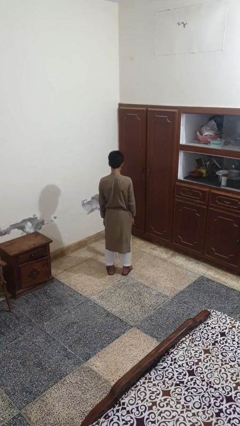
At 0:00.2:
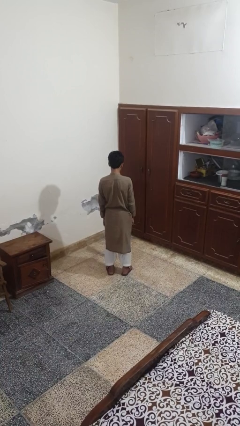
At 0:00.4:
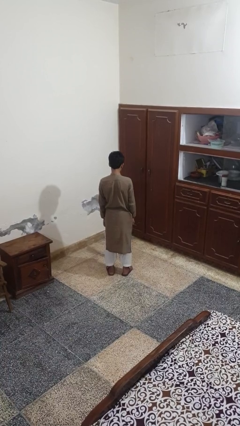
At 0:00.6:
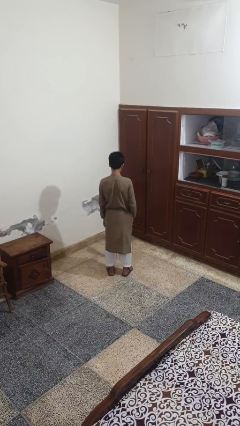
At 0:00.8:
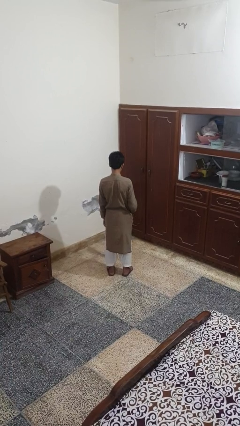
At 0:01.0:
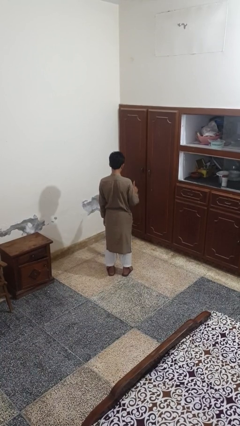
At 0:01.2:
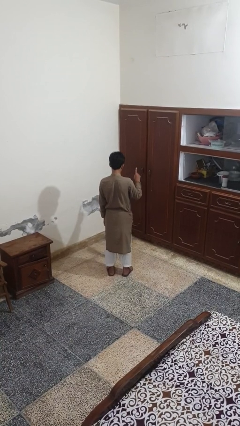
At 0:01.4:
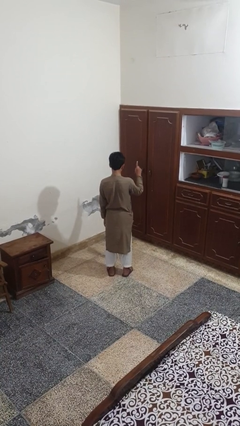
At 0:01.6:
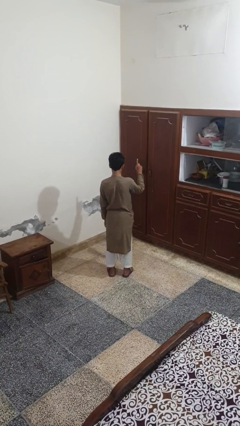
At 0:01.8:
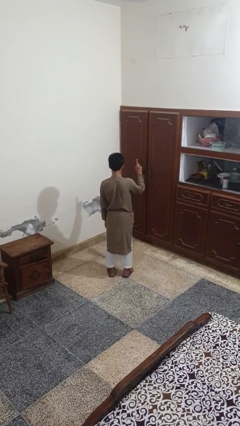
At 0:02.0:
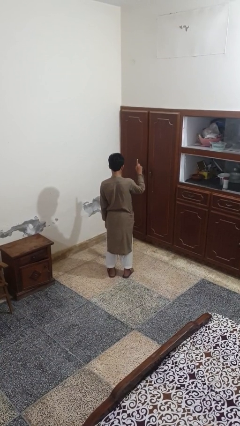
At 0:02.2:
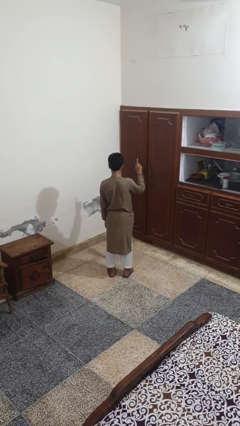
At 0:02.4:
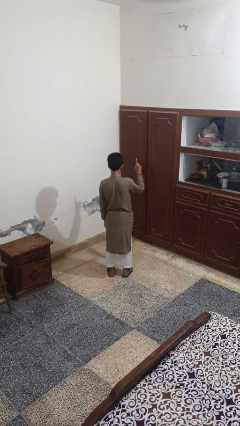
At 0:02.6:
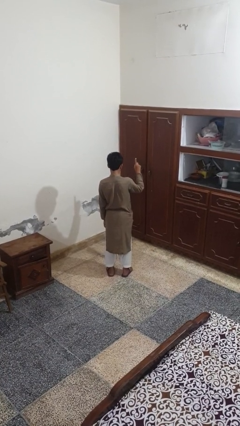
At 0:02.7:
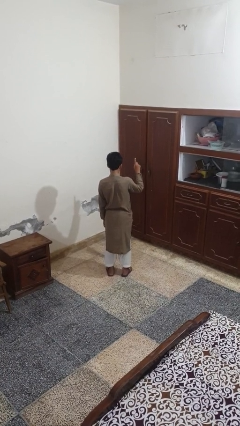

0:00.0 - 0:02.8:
person gestures number one

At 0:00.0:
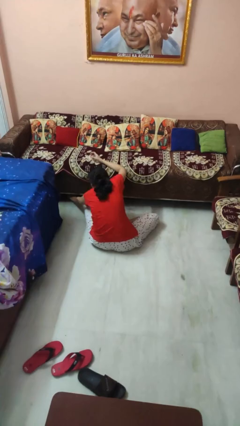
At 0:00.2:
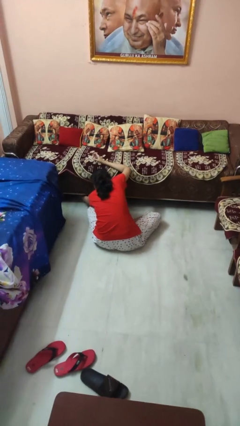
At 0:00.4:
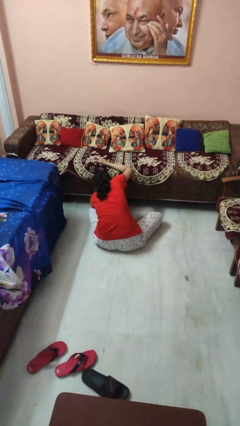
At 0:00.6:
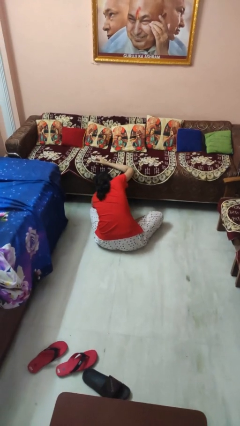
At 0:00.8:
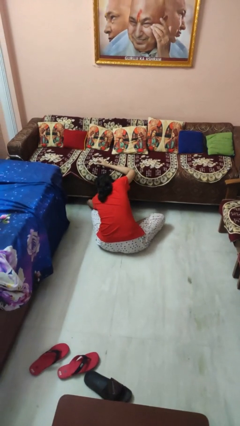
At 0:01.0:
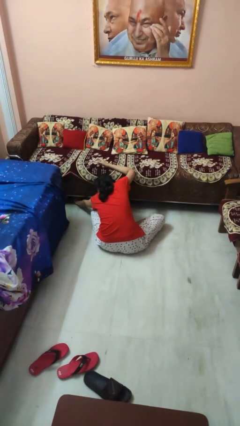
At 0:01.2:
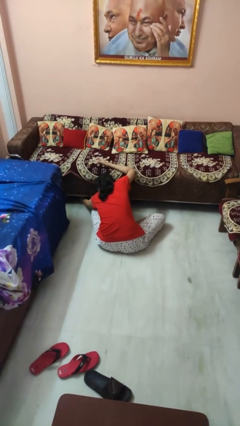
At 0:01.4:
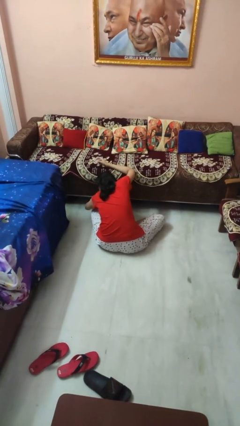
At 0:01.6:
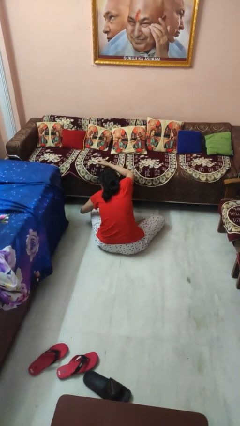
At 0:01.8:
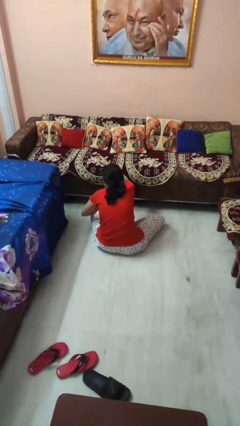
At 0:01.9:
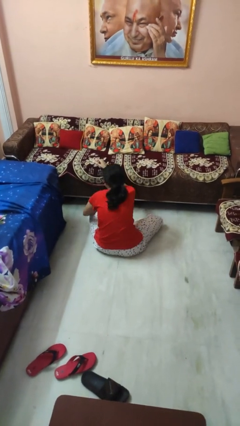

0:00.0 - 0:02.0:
person searches under couch

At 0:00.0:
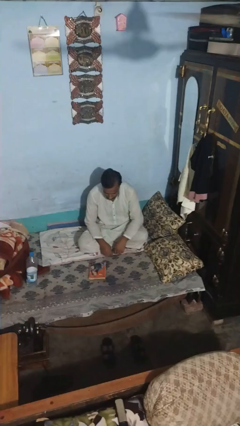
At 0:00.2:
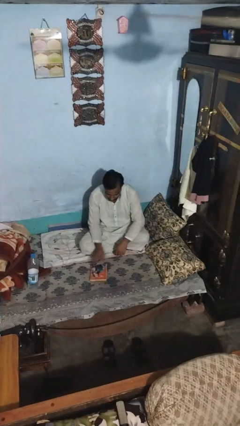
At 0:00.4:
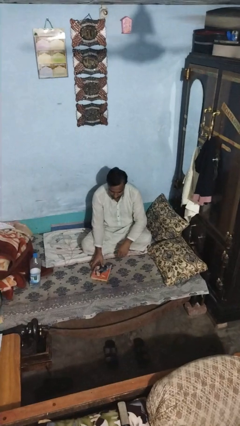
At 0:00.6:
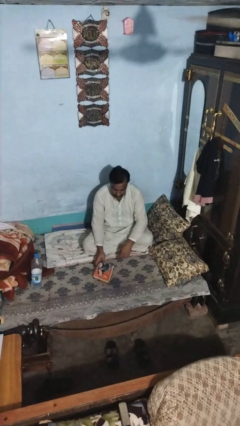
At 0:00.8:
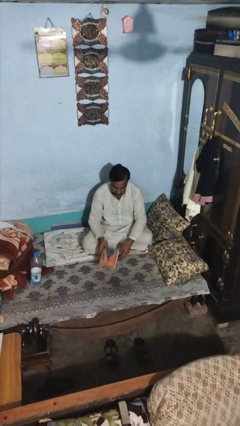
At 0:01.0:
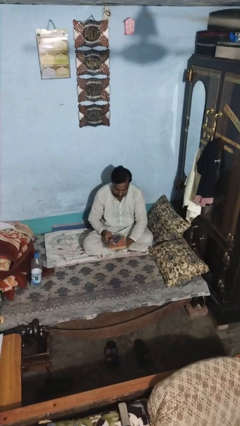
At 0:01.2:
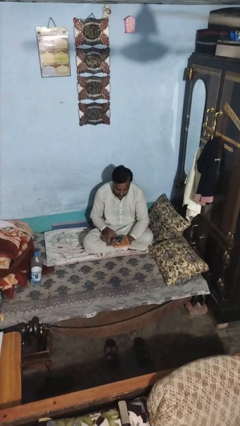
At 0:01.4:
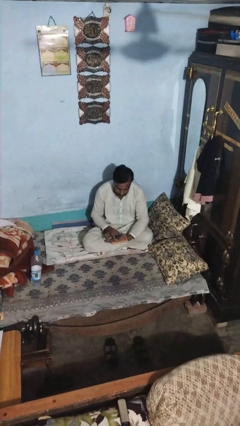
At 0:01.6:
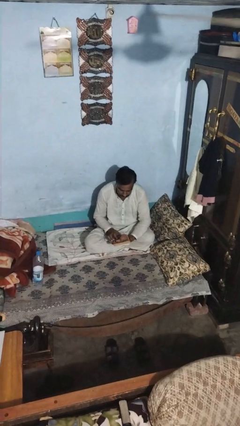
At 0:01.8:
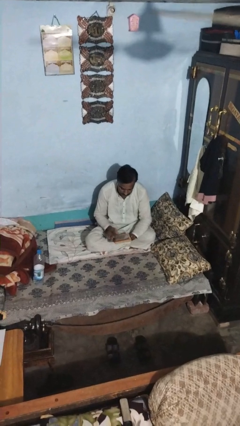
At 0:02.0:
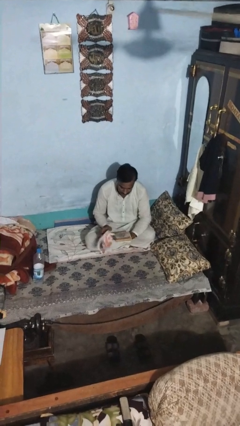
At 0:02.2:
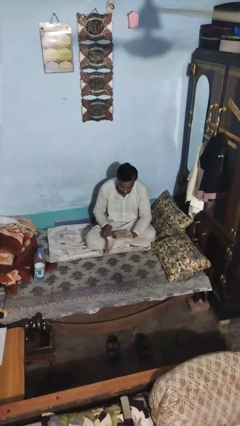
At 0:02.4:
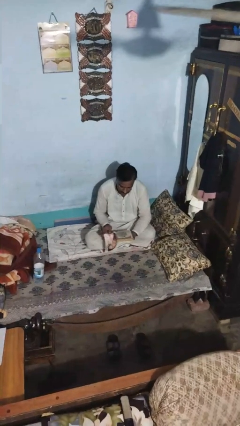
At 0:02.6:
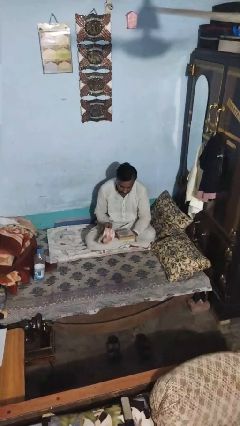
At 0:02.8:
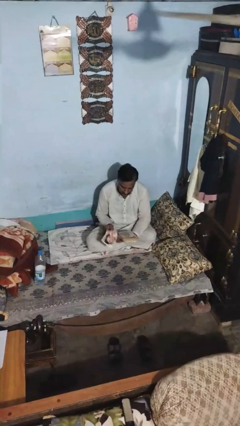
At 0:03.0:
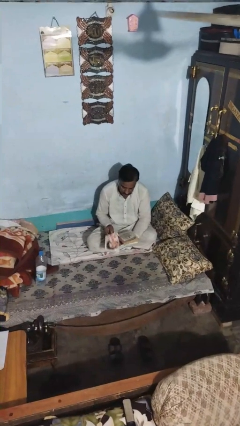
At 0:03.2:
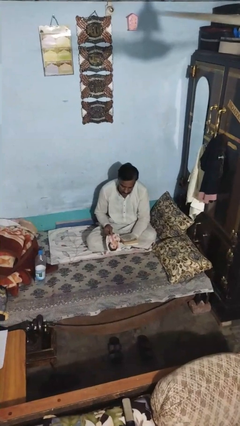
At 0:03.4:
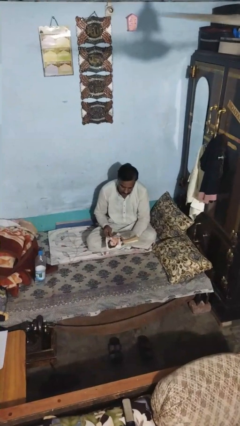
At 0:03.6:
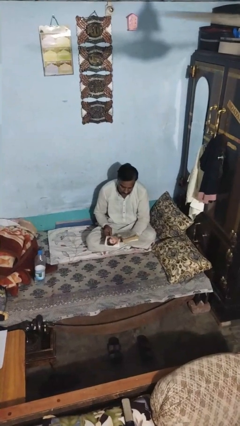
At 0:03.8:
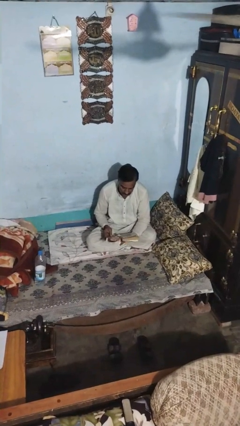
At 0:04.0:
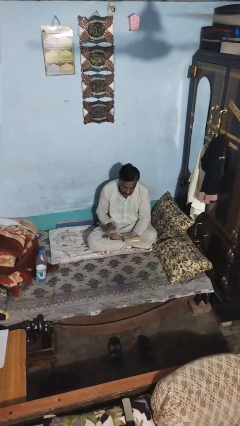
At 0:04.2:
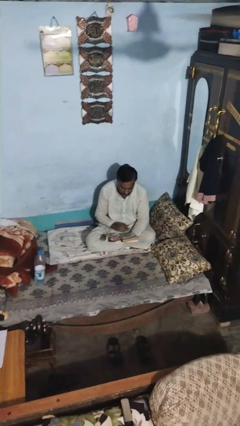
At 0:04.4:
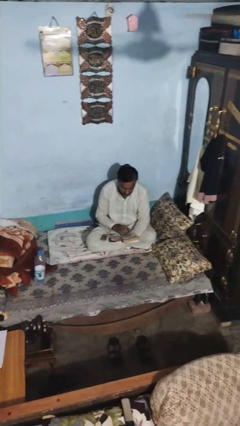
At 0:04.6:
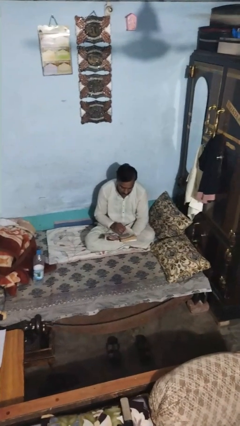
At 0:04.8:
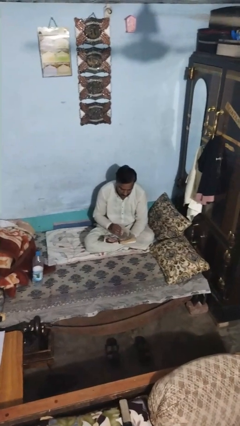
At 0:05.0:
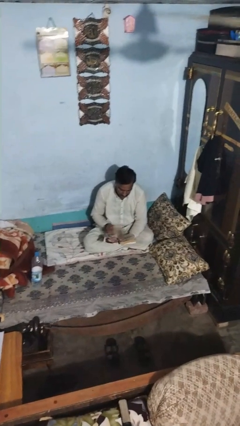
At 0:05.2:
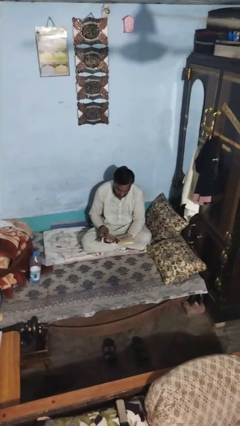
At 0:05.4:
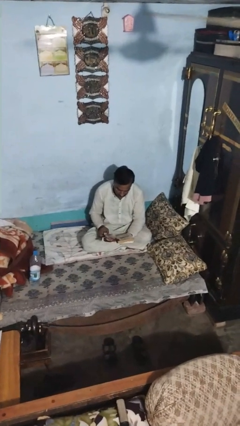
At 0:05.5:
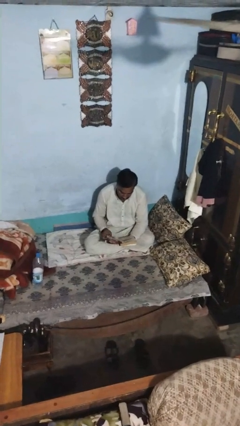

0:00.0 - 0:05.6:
person reads magazine

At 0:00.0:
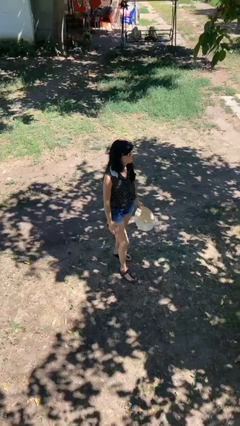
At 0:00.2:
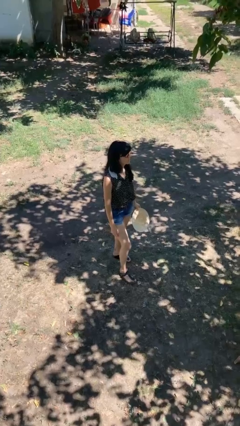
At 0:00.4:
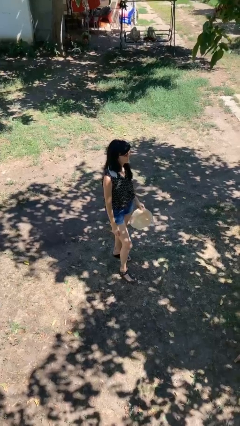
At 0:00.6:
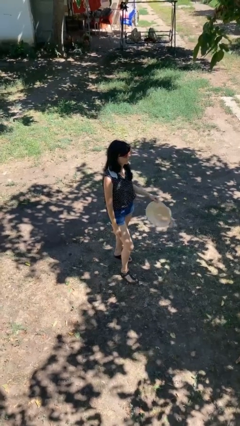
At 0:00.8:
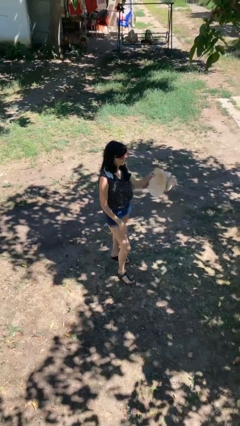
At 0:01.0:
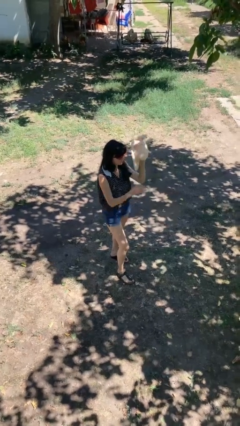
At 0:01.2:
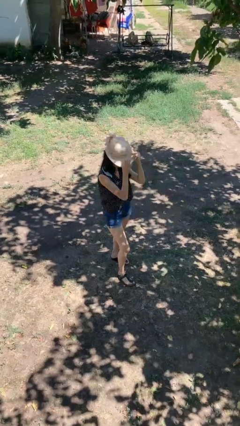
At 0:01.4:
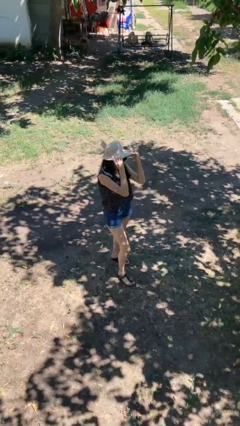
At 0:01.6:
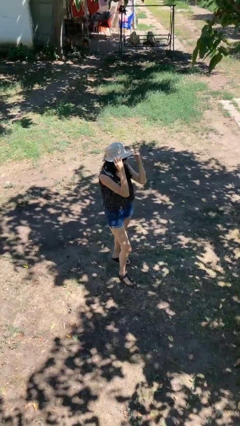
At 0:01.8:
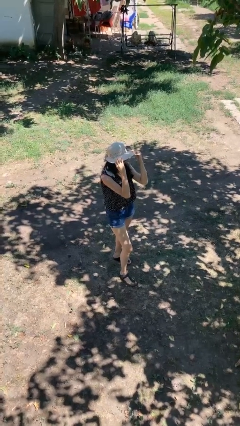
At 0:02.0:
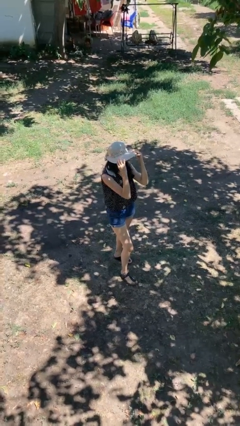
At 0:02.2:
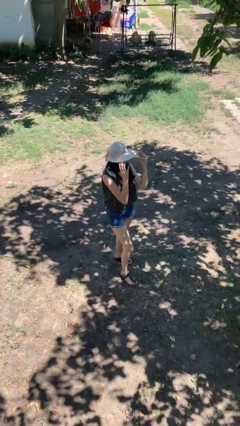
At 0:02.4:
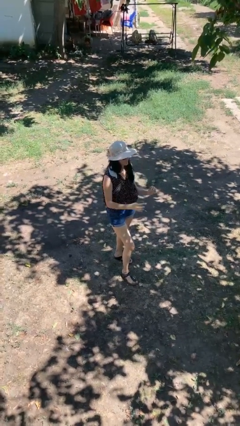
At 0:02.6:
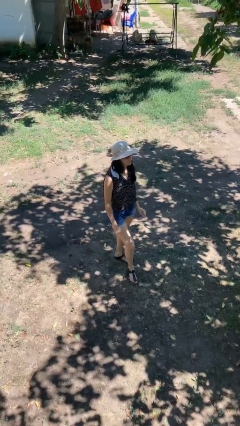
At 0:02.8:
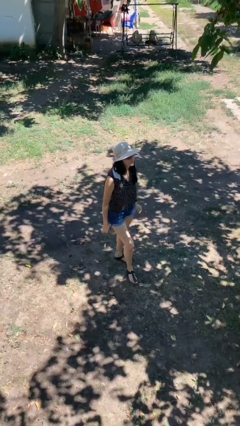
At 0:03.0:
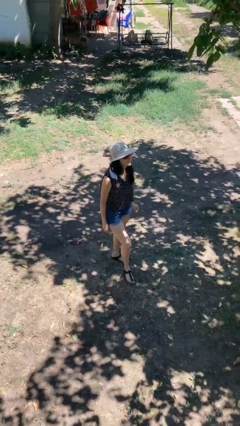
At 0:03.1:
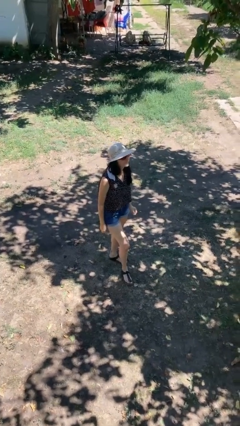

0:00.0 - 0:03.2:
person puts on hat

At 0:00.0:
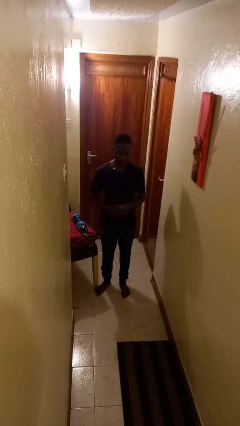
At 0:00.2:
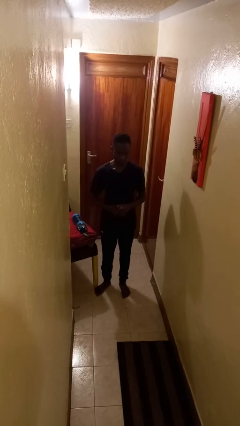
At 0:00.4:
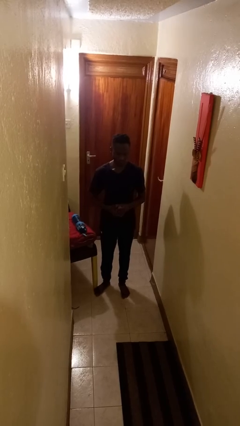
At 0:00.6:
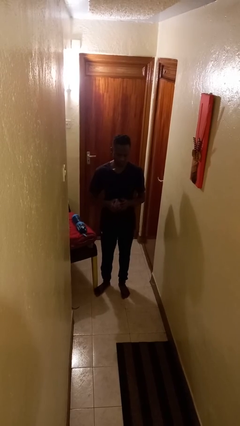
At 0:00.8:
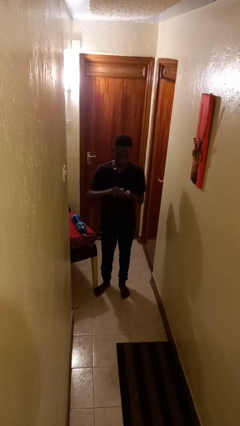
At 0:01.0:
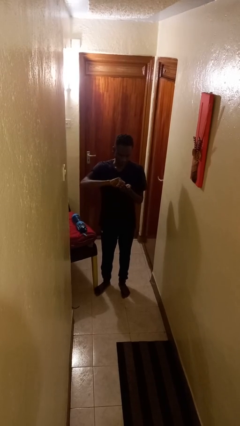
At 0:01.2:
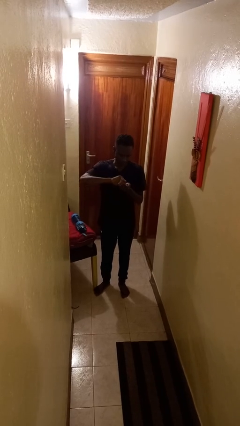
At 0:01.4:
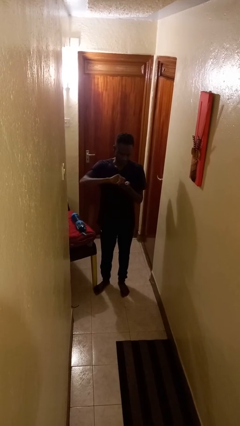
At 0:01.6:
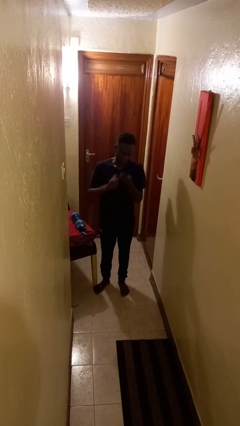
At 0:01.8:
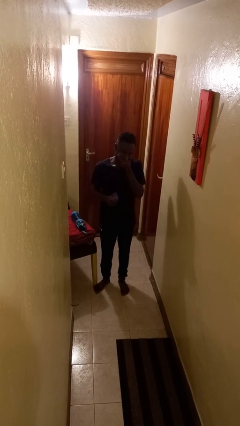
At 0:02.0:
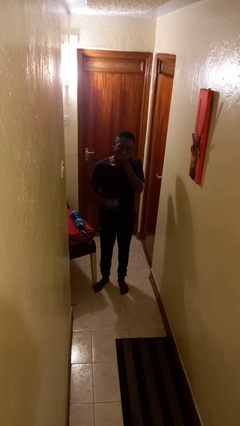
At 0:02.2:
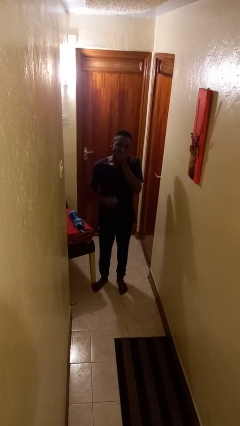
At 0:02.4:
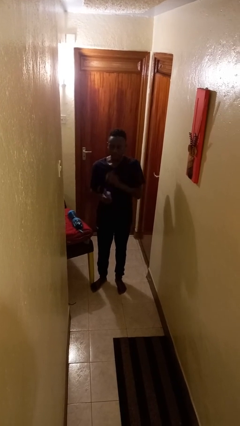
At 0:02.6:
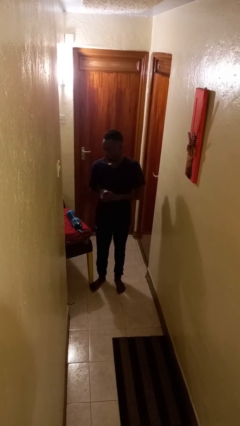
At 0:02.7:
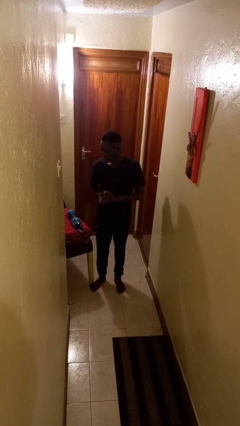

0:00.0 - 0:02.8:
person takes medicine pills

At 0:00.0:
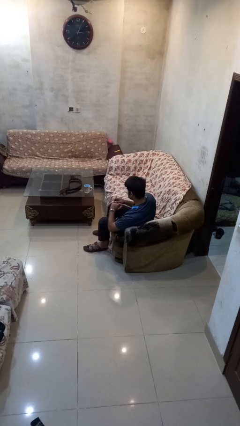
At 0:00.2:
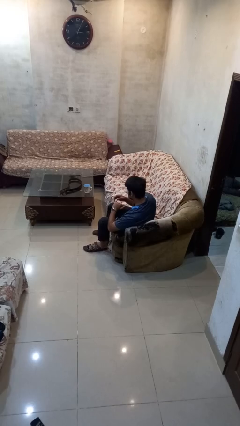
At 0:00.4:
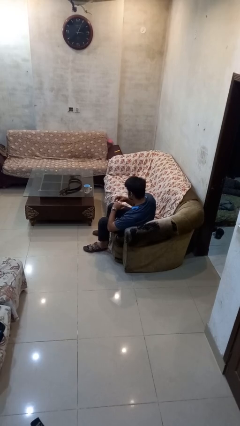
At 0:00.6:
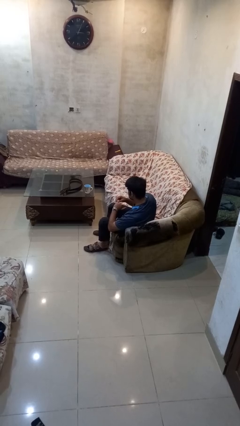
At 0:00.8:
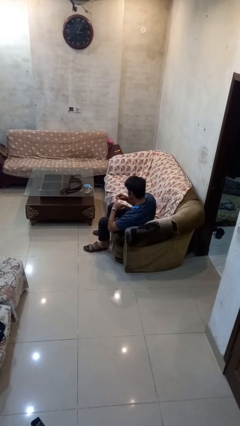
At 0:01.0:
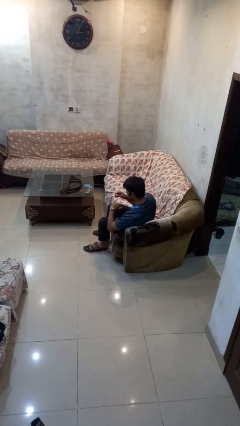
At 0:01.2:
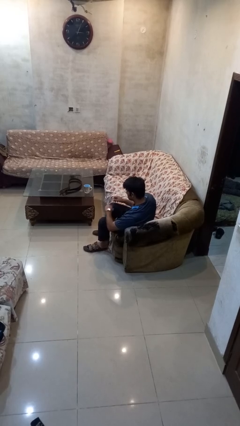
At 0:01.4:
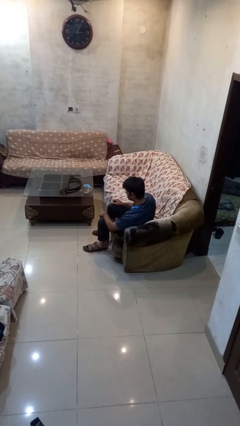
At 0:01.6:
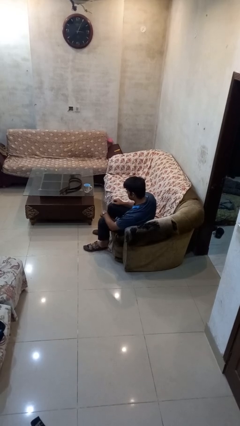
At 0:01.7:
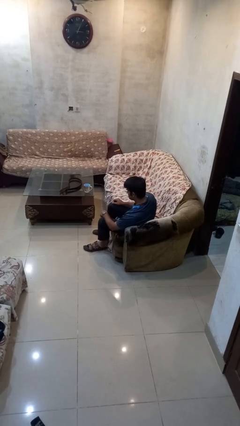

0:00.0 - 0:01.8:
person takes off ring
